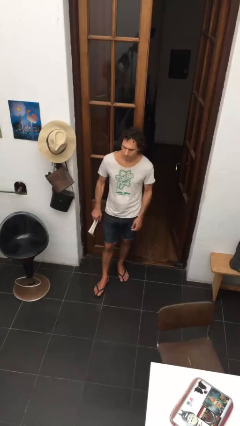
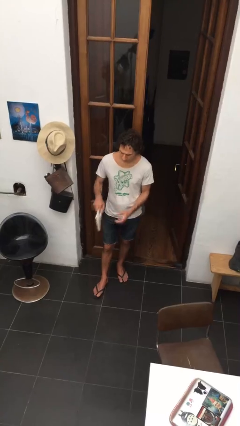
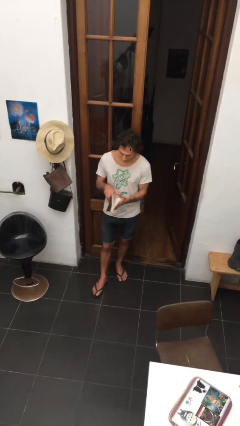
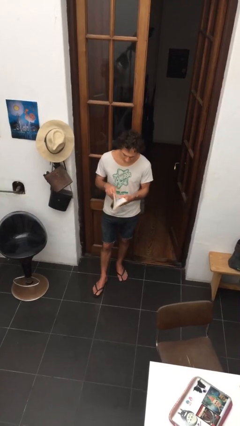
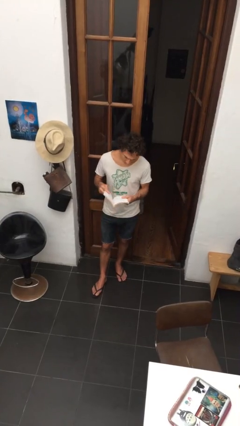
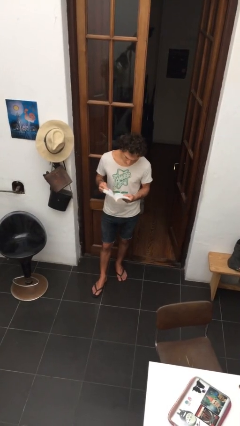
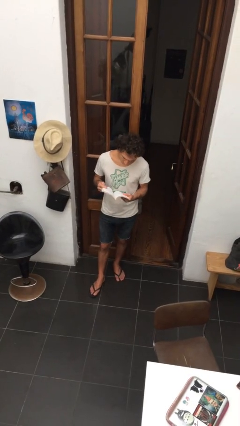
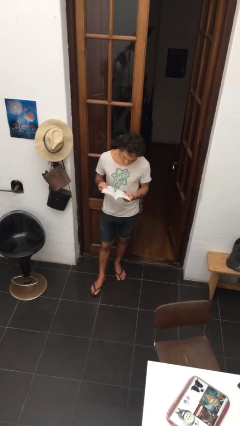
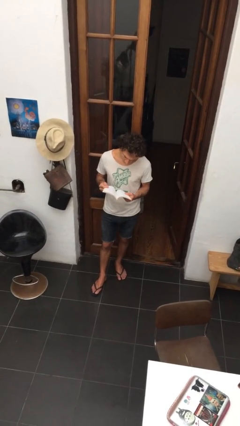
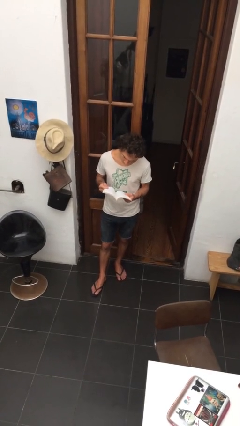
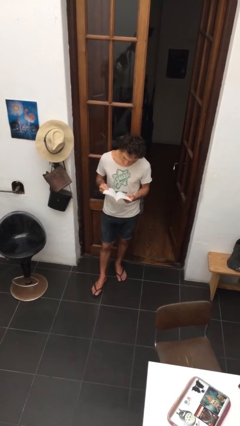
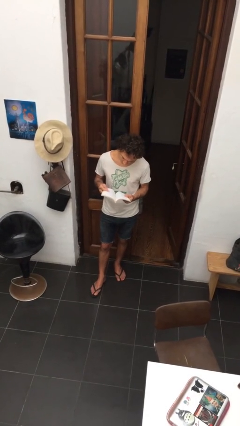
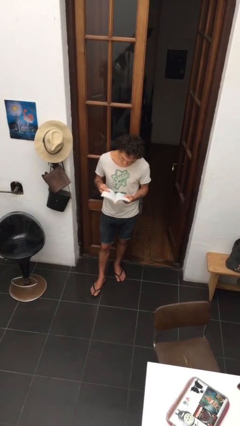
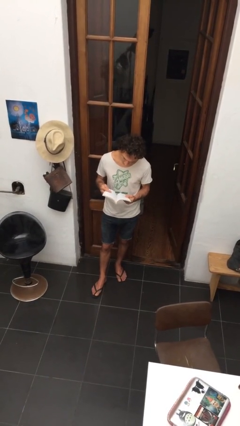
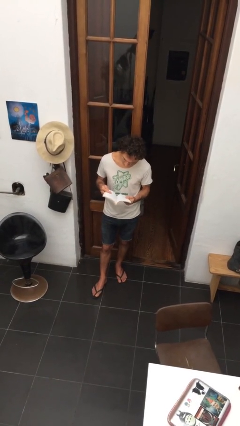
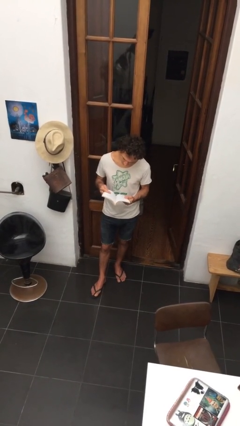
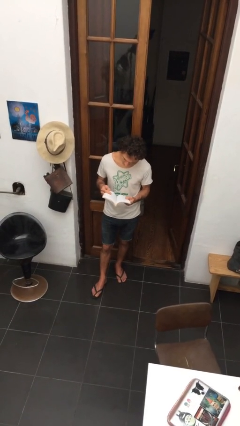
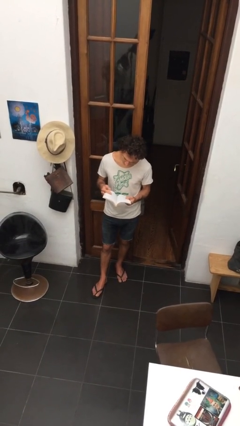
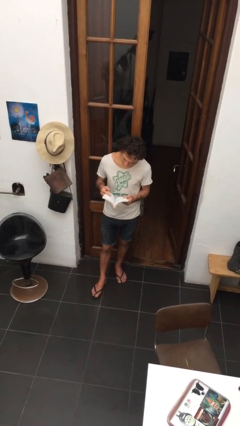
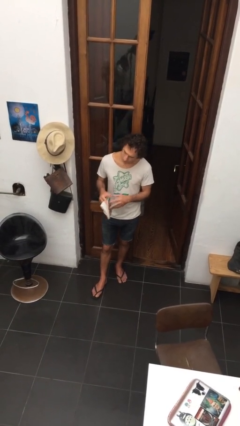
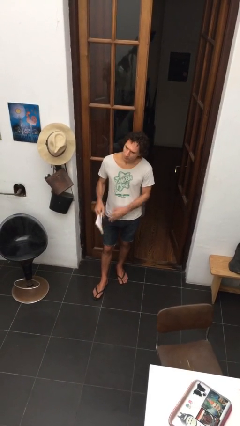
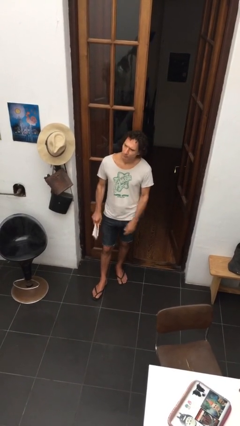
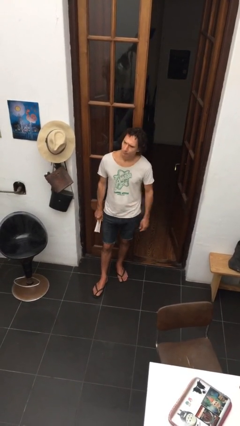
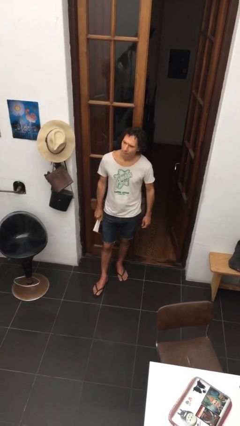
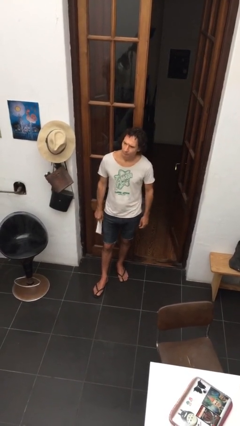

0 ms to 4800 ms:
person reads document

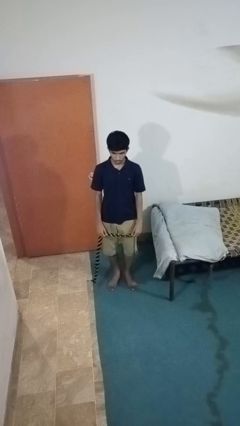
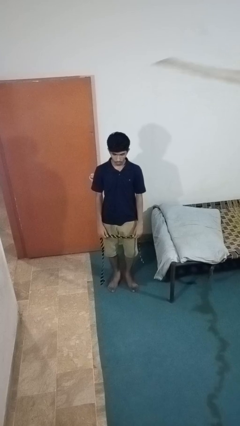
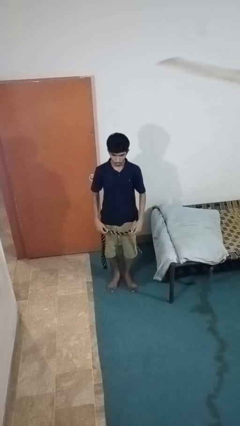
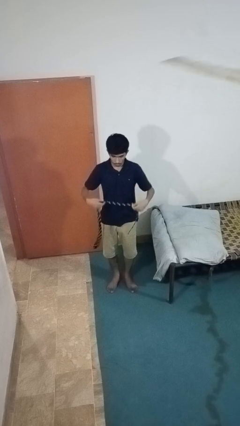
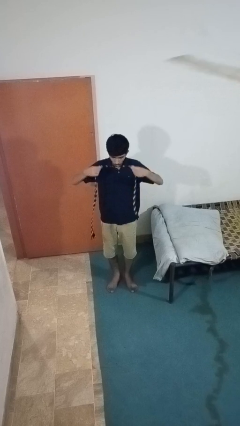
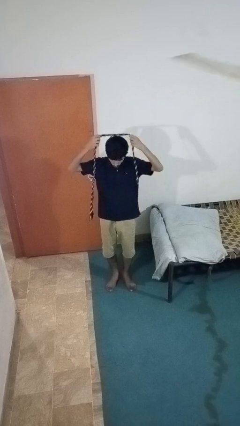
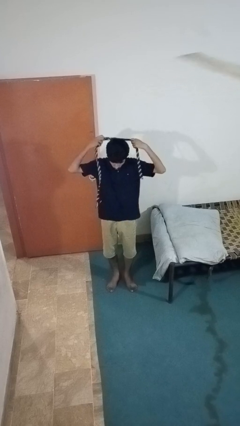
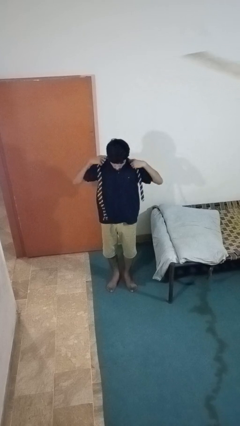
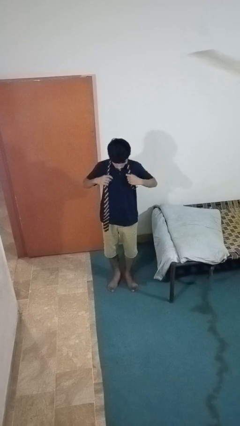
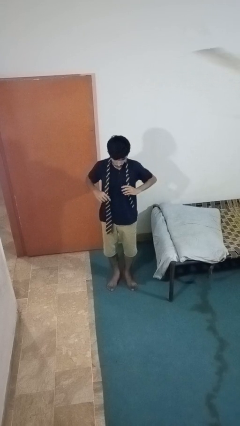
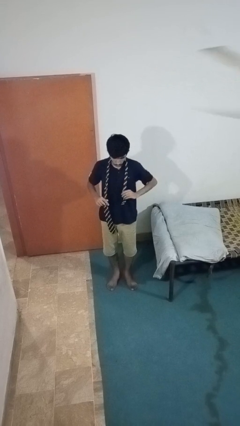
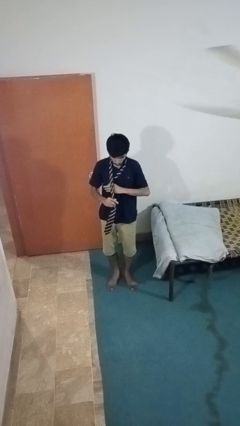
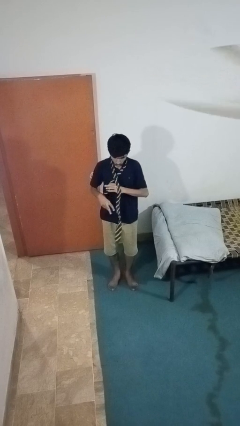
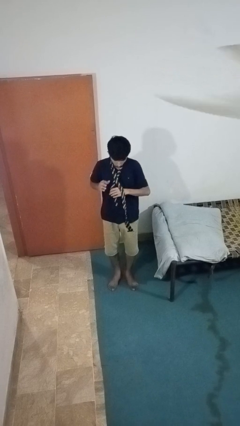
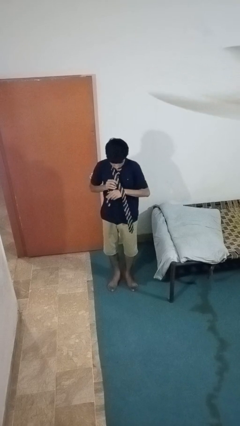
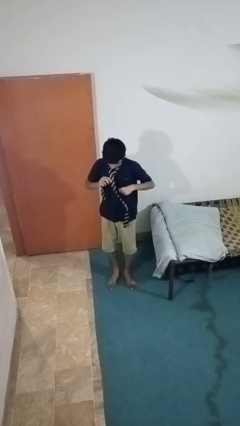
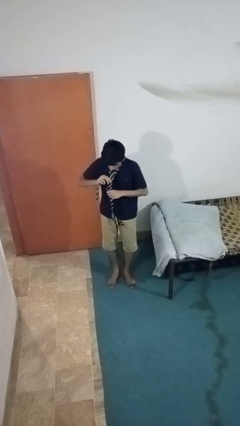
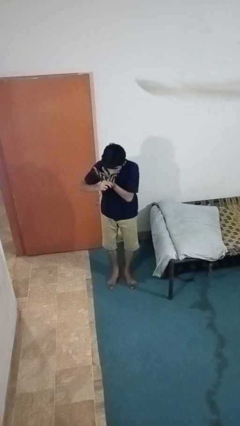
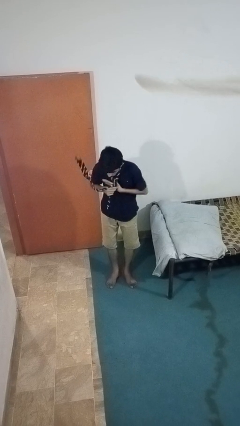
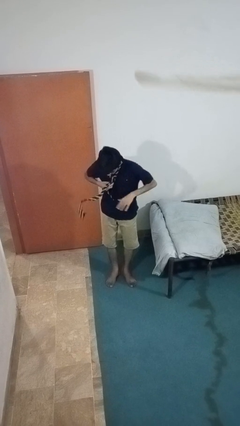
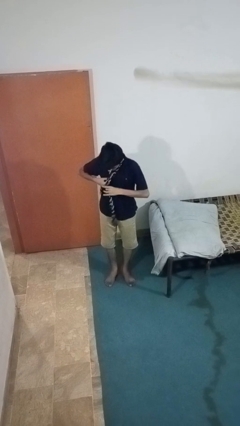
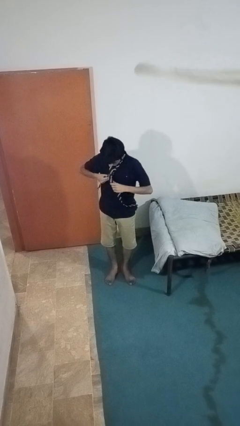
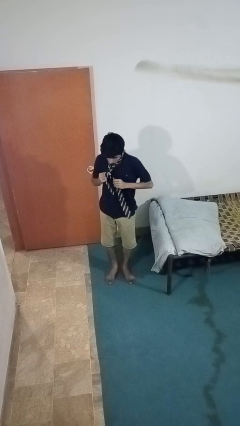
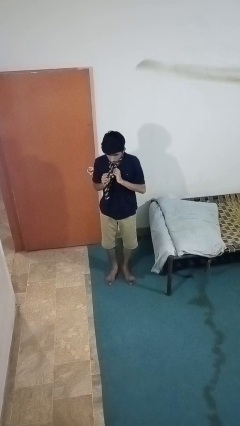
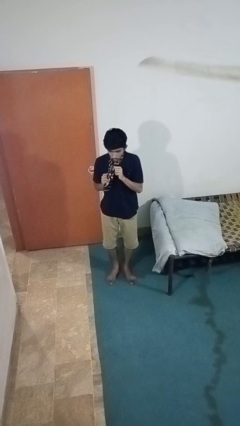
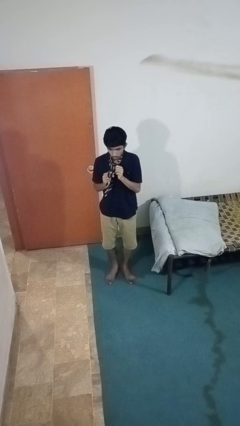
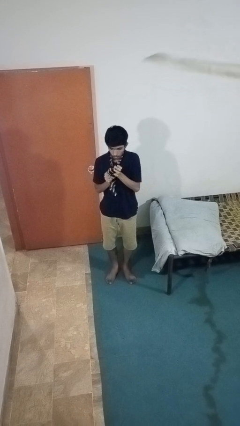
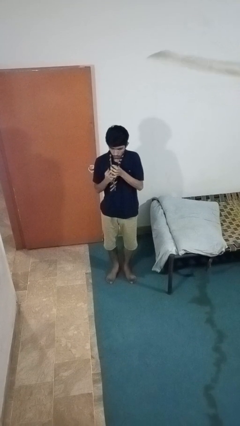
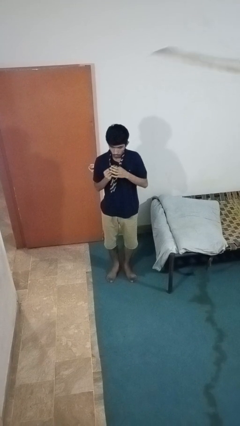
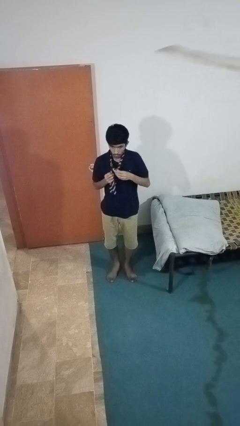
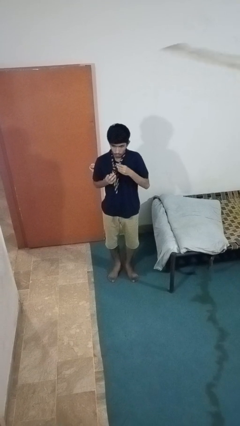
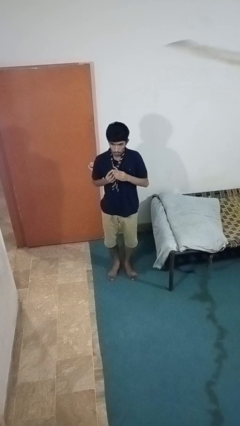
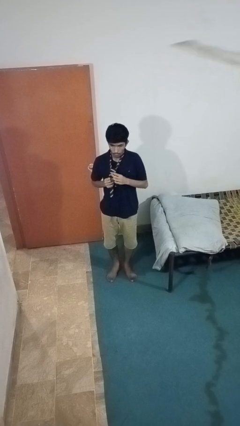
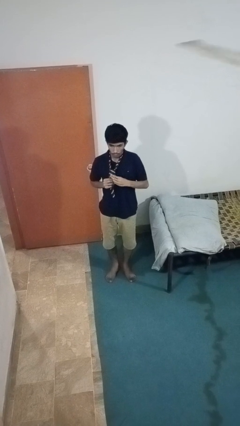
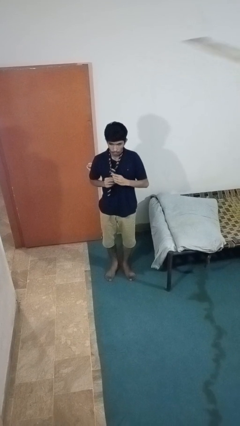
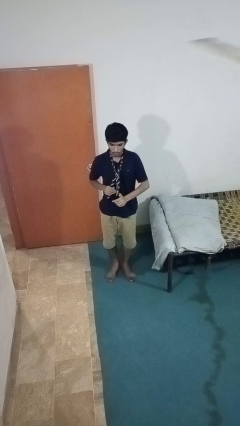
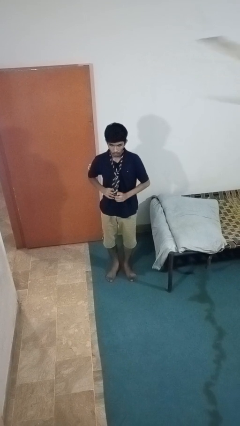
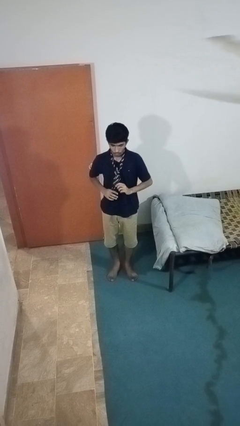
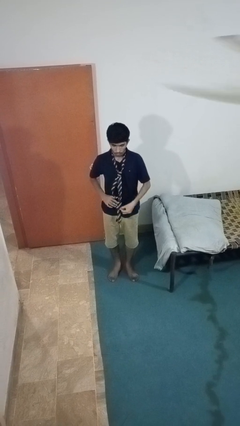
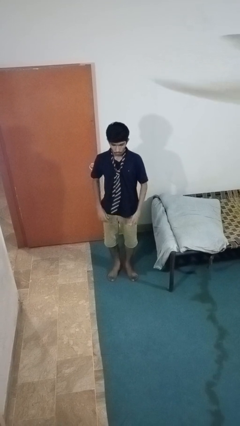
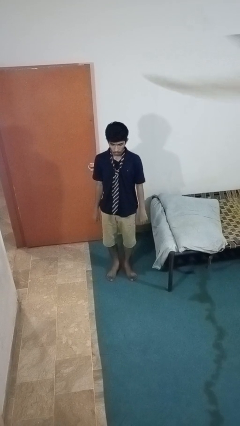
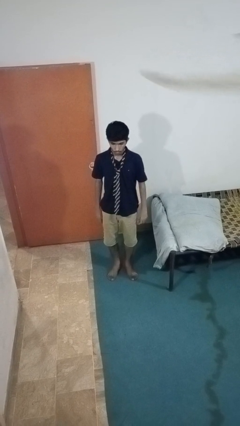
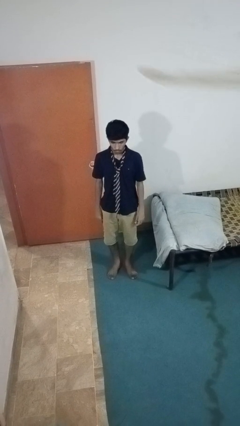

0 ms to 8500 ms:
person puts on necktie

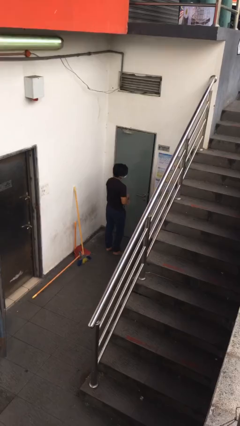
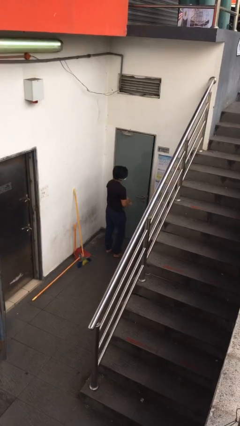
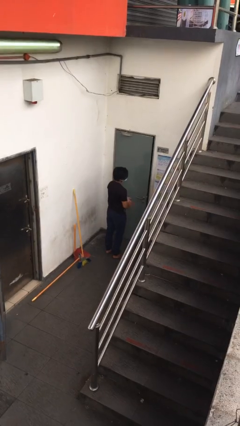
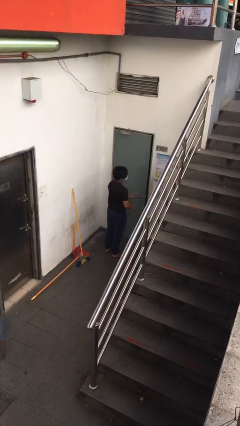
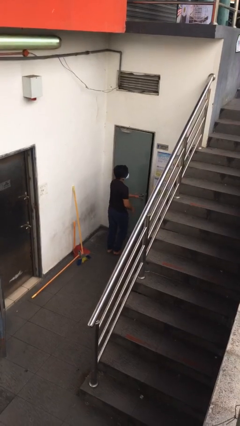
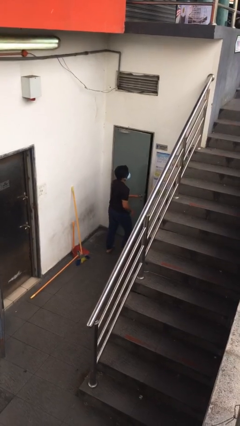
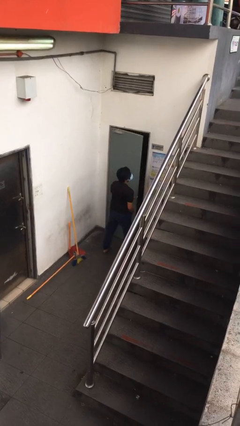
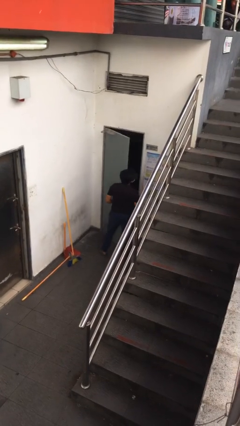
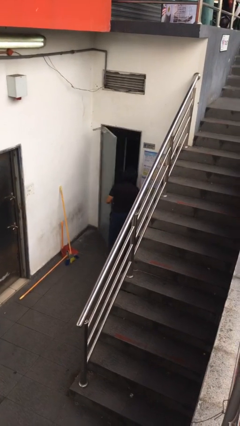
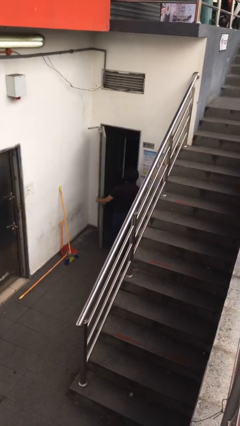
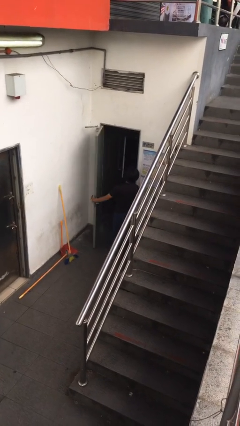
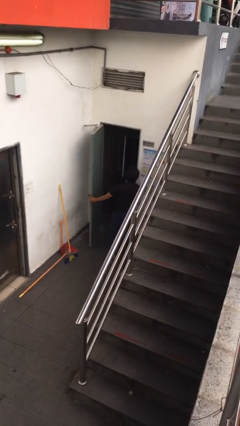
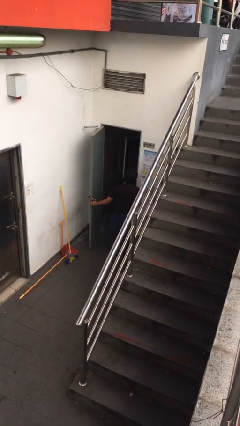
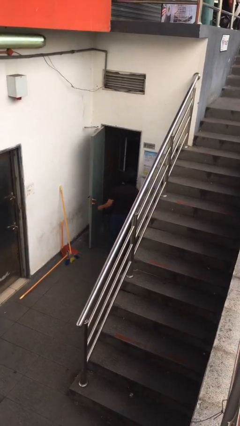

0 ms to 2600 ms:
person opens facility door

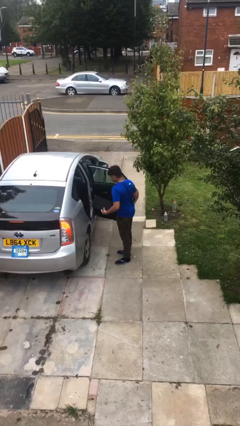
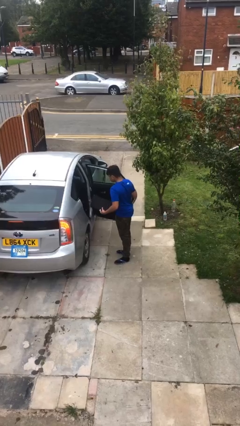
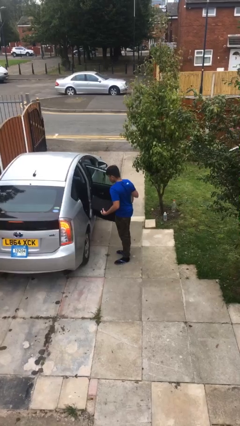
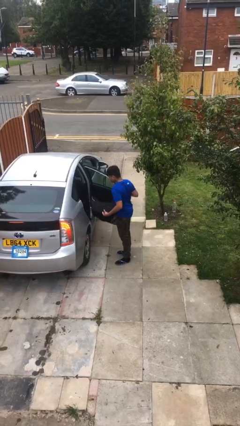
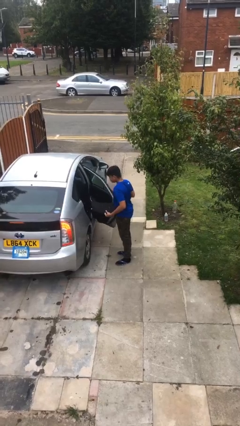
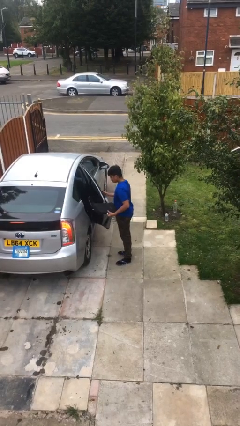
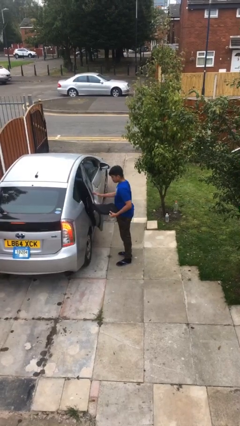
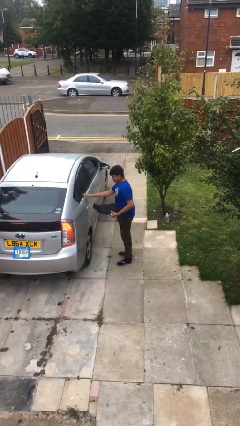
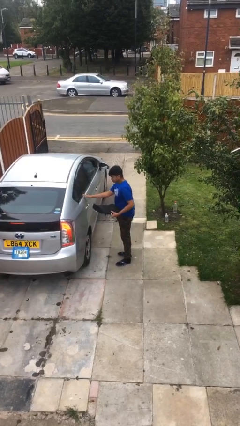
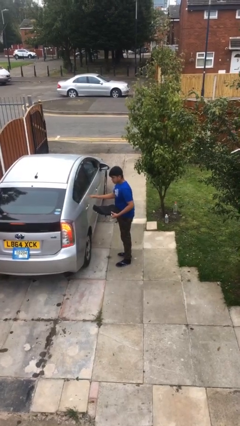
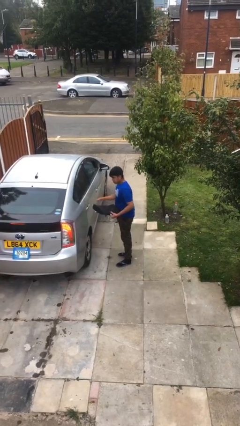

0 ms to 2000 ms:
person closes car door

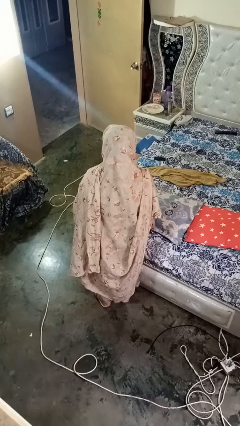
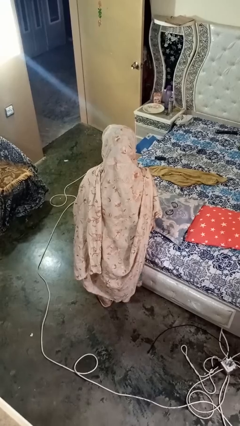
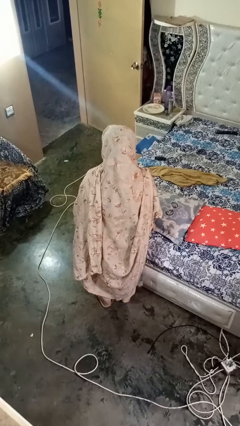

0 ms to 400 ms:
person taps object with finger
